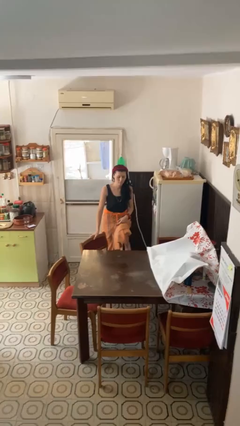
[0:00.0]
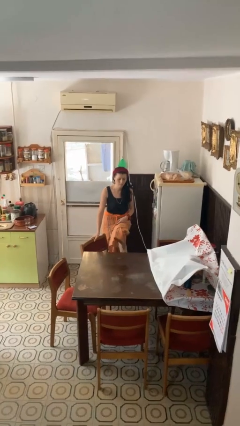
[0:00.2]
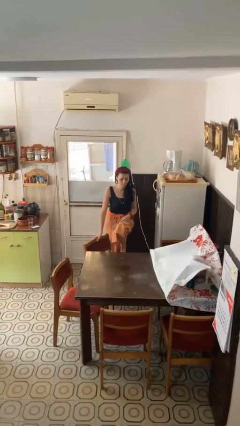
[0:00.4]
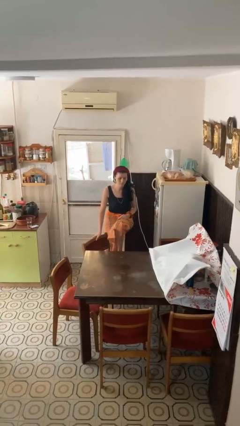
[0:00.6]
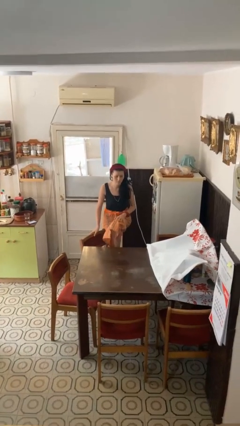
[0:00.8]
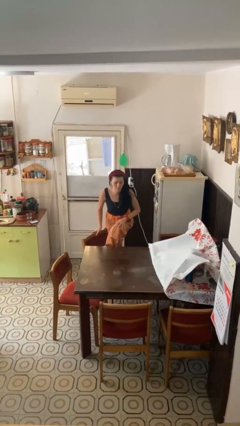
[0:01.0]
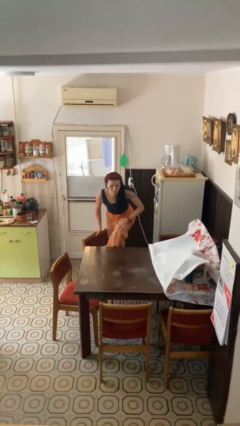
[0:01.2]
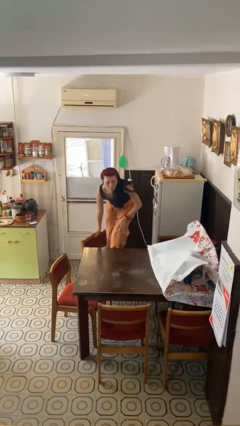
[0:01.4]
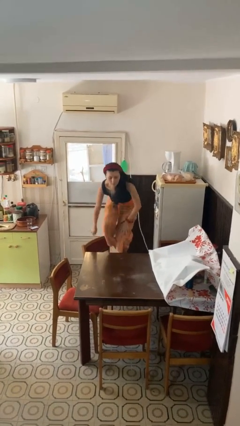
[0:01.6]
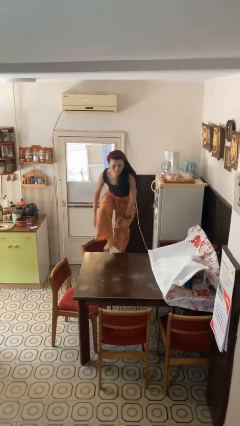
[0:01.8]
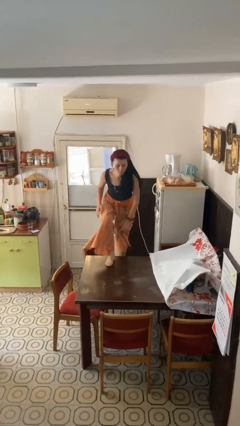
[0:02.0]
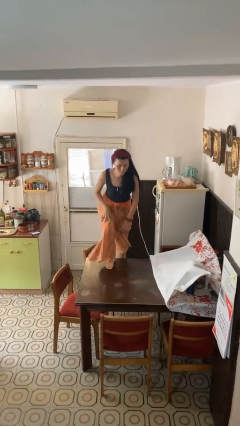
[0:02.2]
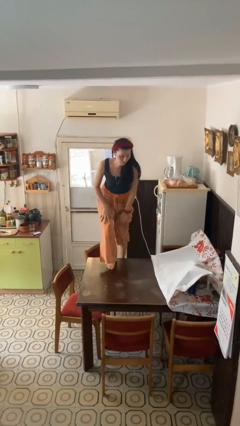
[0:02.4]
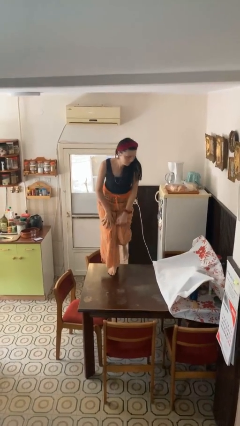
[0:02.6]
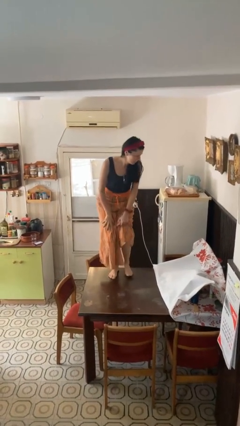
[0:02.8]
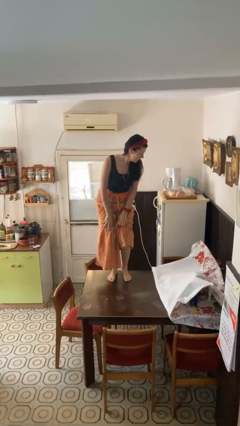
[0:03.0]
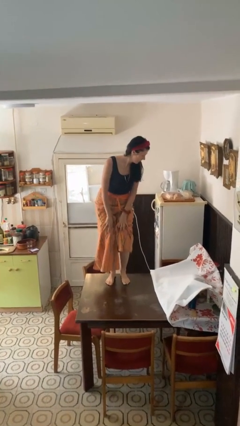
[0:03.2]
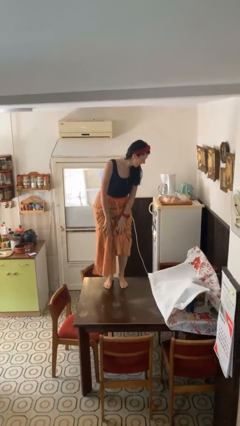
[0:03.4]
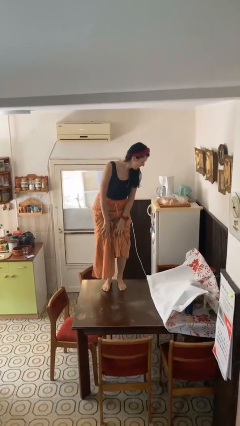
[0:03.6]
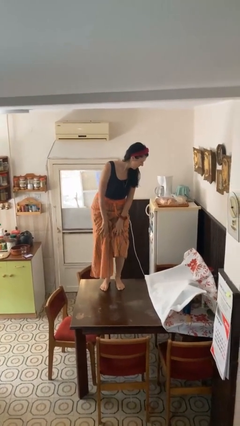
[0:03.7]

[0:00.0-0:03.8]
person climbs on table

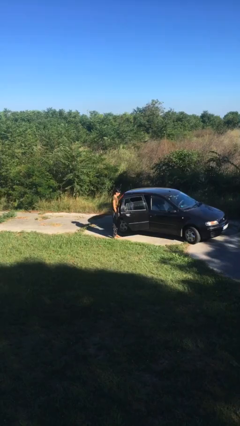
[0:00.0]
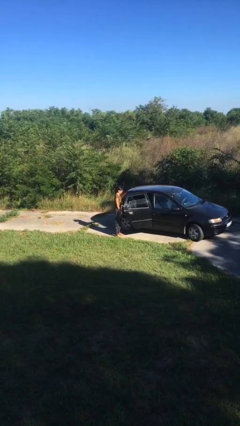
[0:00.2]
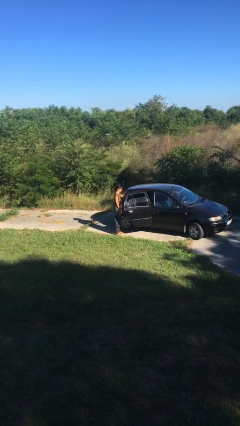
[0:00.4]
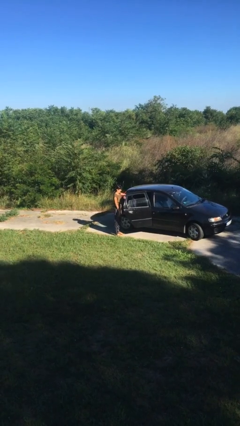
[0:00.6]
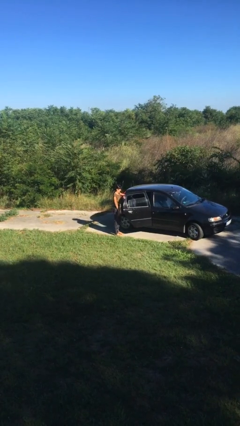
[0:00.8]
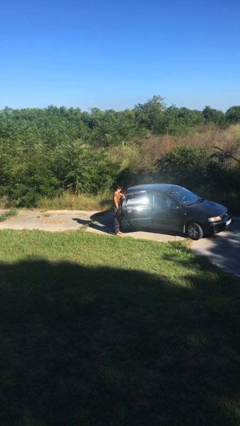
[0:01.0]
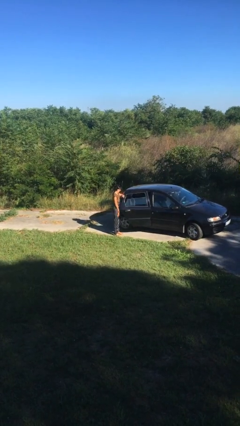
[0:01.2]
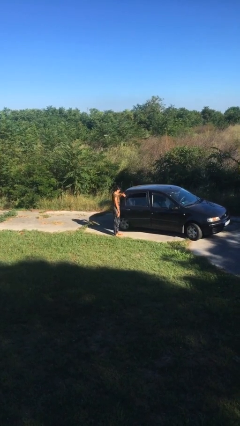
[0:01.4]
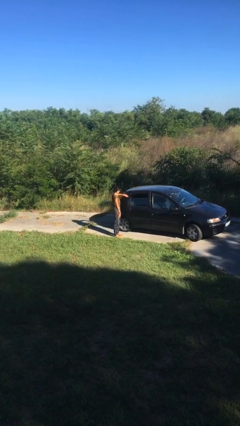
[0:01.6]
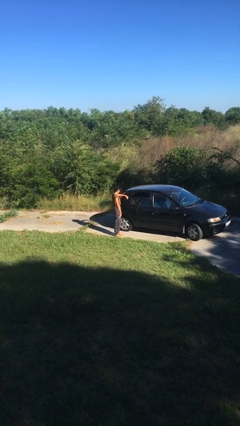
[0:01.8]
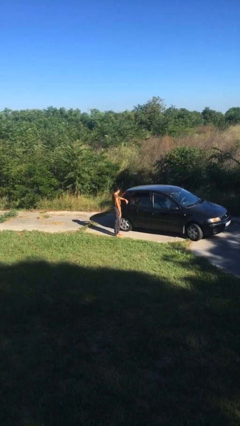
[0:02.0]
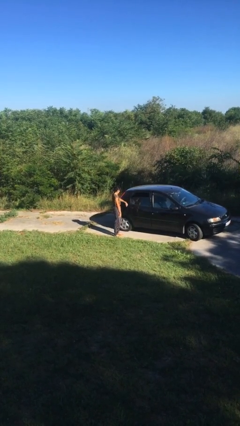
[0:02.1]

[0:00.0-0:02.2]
person closes car door

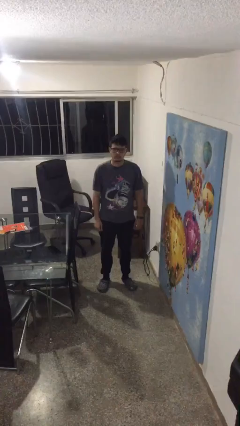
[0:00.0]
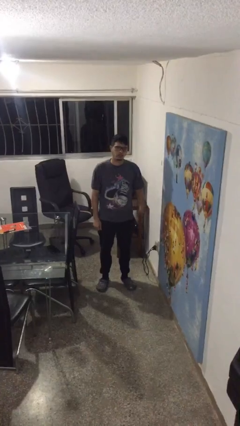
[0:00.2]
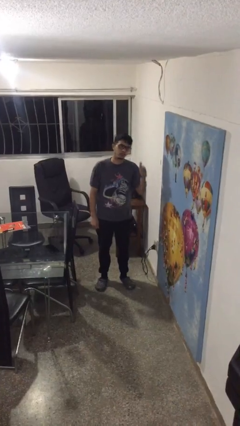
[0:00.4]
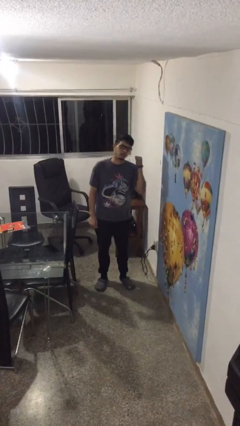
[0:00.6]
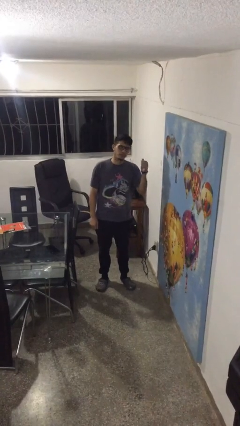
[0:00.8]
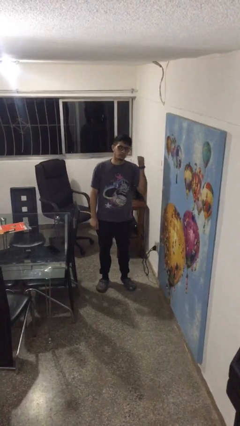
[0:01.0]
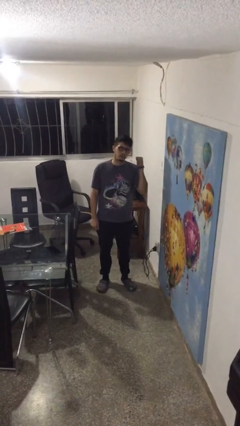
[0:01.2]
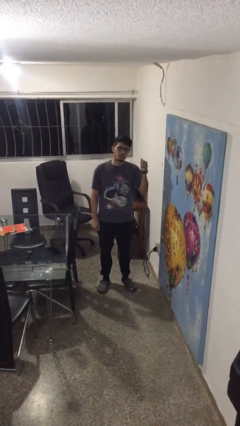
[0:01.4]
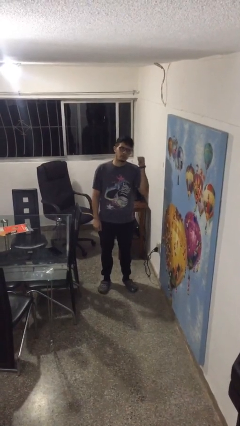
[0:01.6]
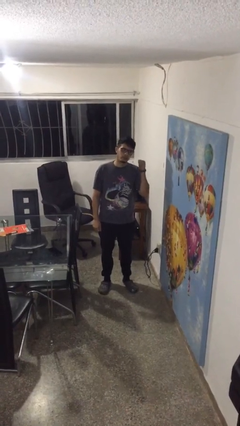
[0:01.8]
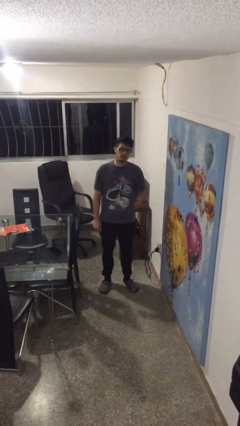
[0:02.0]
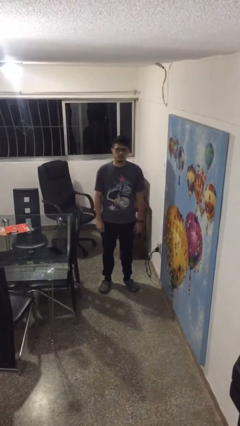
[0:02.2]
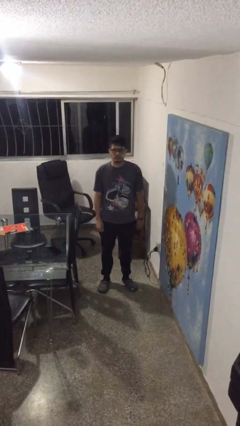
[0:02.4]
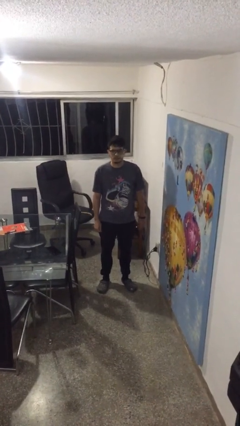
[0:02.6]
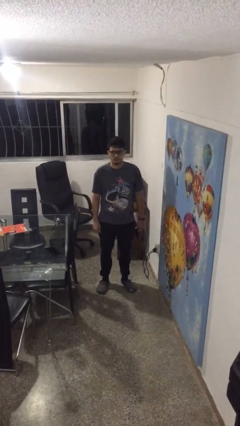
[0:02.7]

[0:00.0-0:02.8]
person gestures behind me

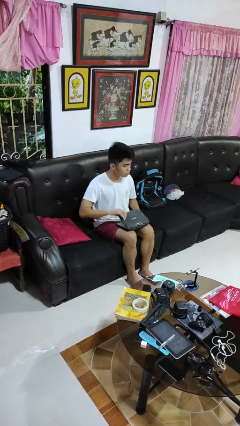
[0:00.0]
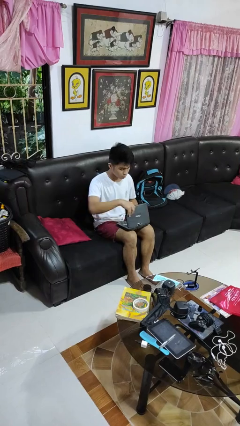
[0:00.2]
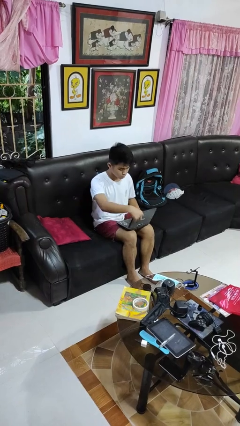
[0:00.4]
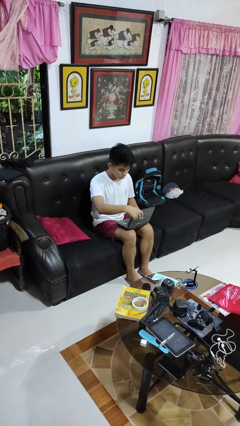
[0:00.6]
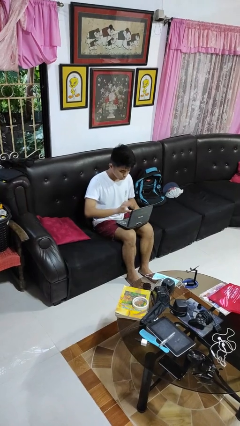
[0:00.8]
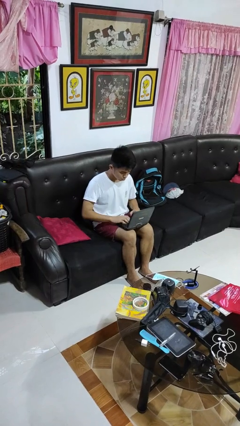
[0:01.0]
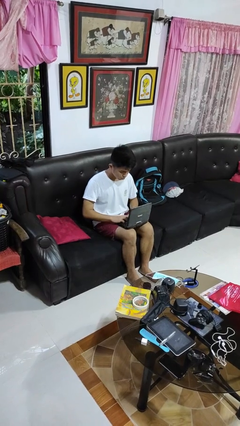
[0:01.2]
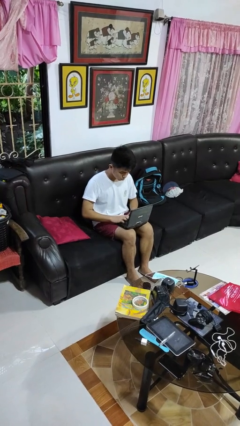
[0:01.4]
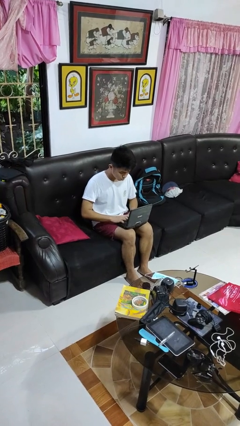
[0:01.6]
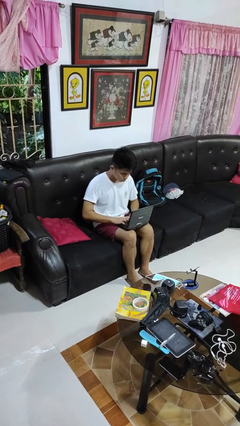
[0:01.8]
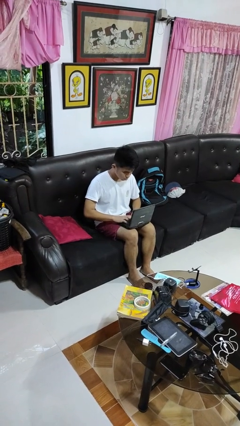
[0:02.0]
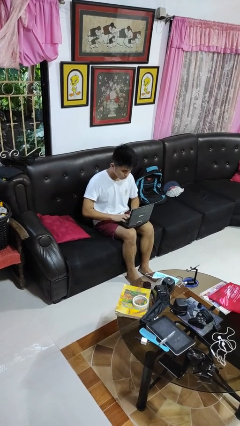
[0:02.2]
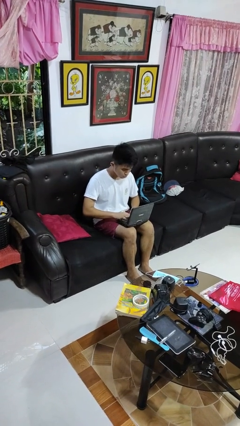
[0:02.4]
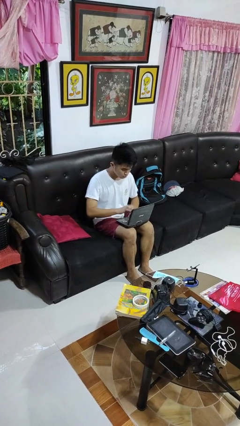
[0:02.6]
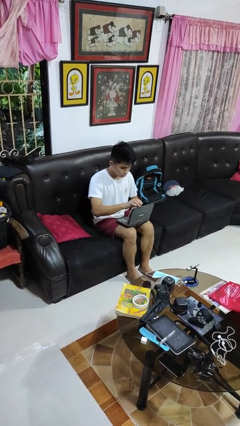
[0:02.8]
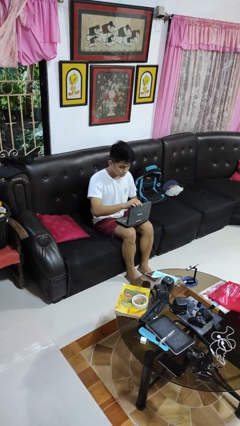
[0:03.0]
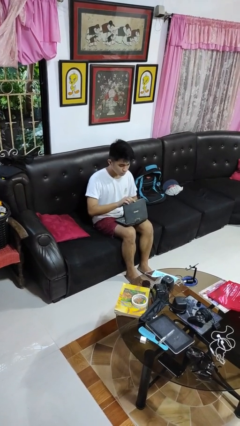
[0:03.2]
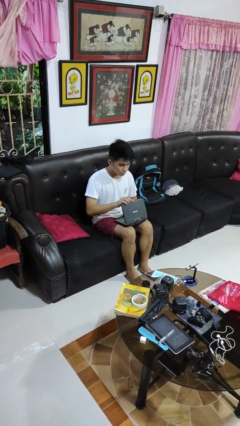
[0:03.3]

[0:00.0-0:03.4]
person opens laptop

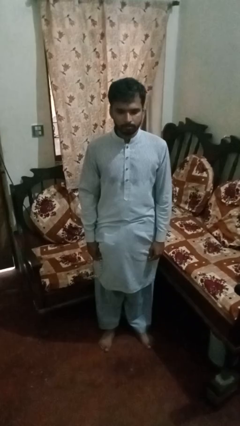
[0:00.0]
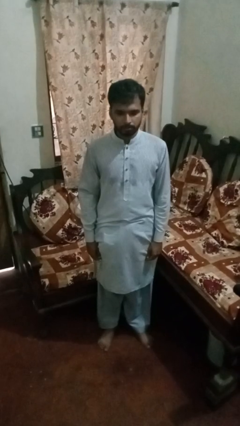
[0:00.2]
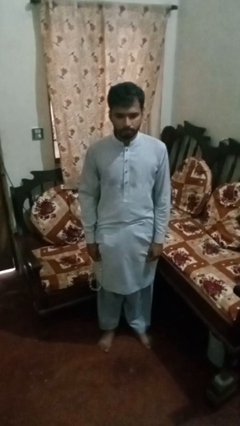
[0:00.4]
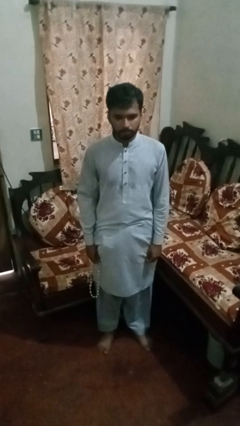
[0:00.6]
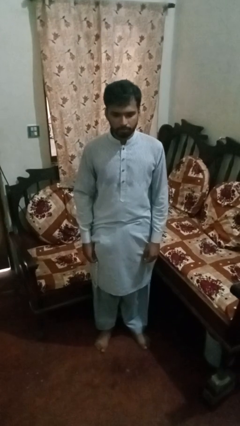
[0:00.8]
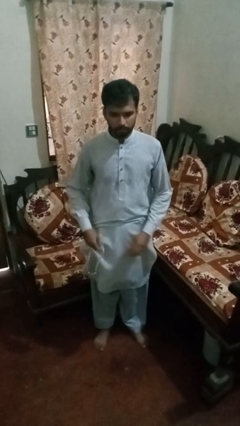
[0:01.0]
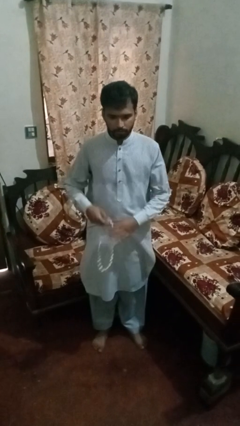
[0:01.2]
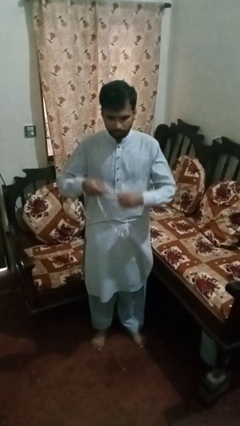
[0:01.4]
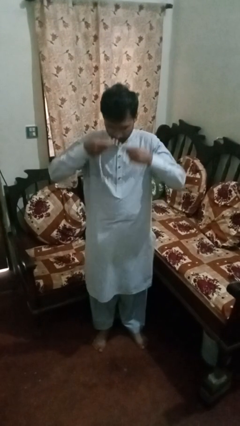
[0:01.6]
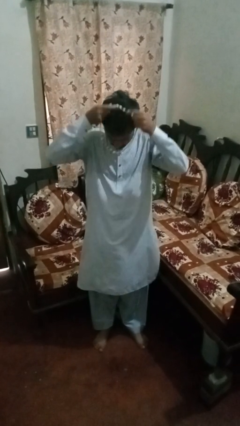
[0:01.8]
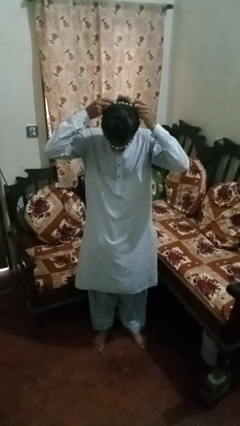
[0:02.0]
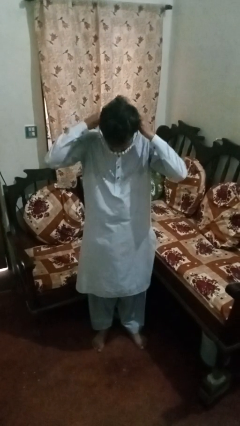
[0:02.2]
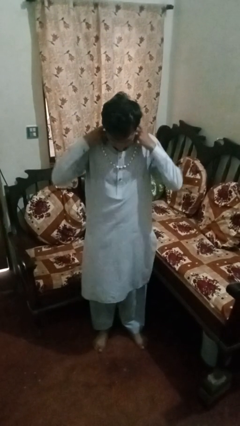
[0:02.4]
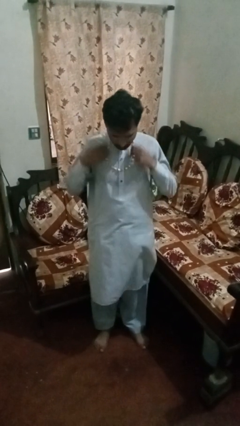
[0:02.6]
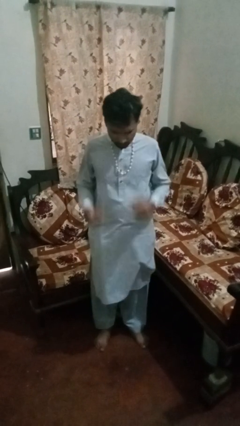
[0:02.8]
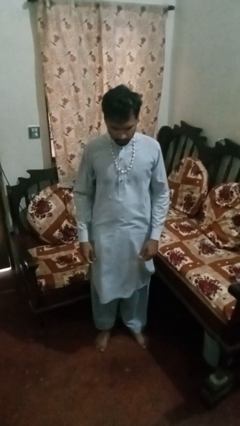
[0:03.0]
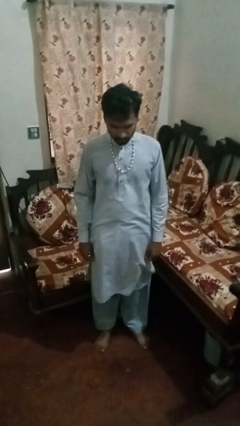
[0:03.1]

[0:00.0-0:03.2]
person puts on necklace

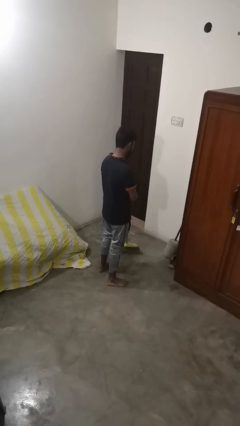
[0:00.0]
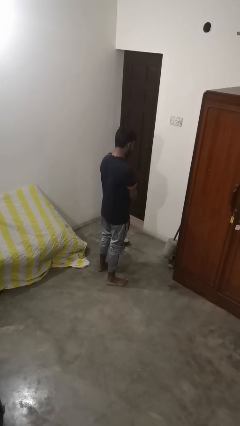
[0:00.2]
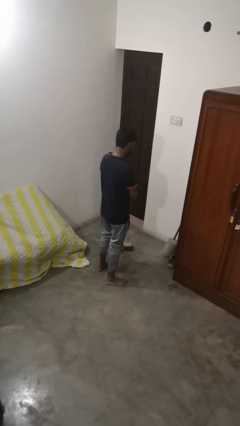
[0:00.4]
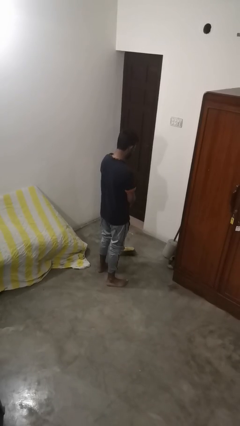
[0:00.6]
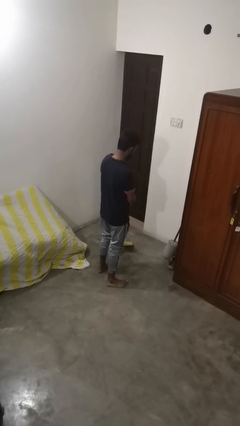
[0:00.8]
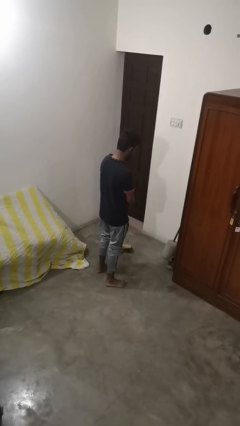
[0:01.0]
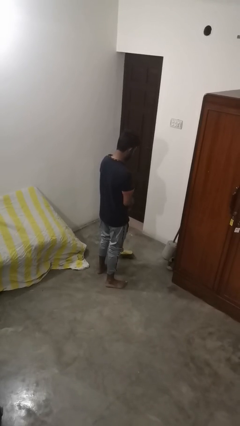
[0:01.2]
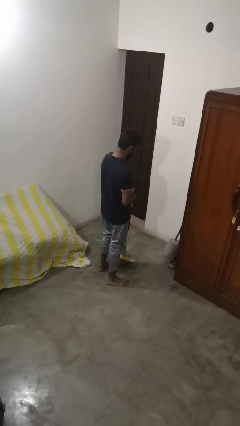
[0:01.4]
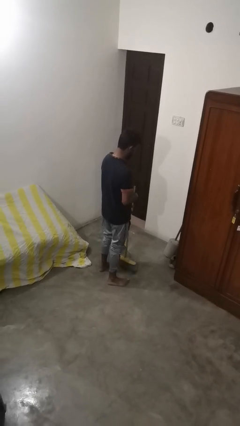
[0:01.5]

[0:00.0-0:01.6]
person sweeps floor

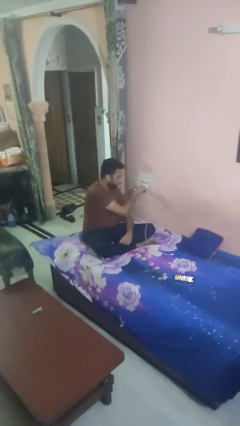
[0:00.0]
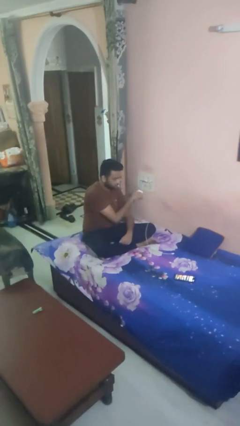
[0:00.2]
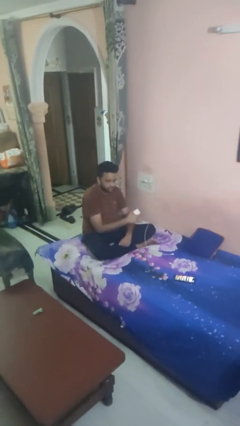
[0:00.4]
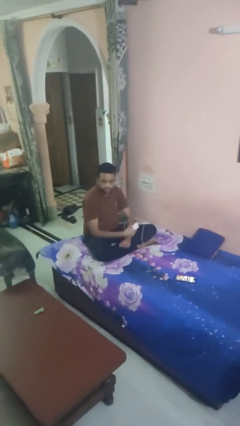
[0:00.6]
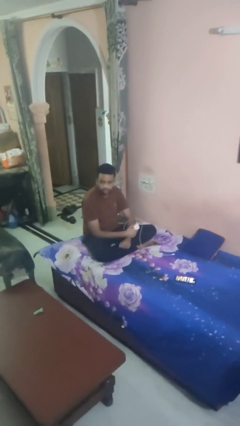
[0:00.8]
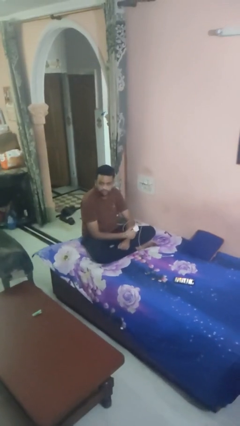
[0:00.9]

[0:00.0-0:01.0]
person unplugs from electrical socket
